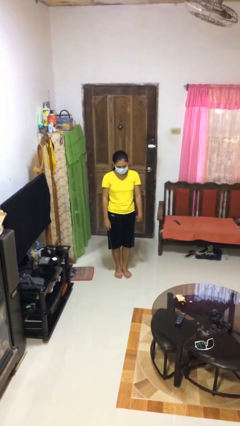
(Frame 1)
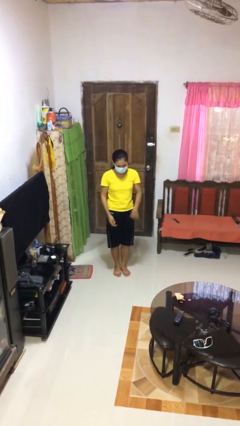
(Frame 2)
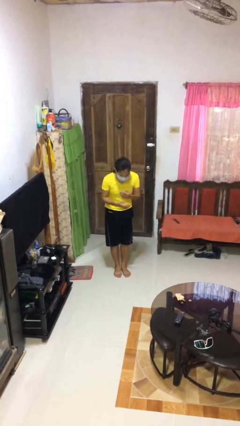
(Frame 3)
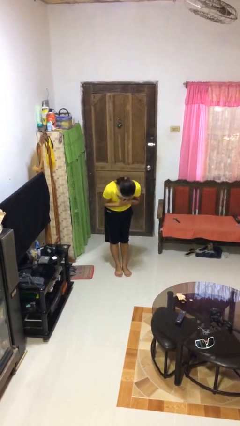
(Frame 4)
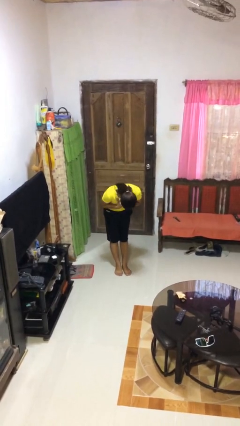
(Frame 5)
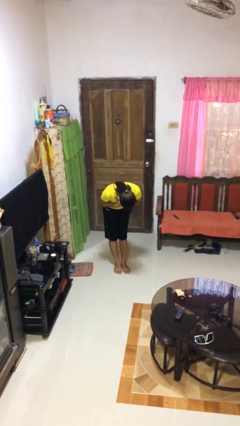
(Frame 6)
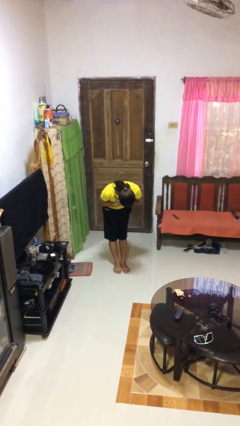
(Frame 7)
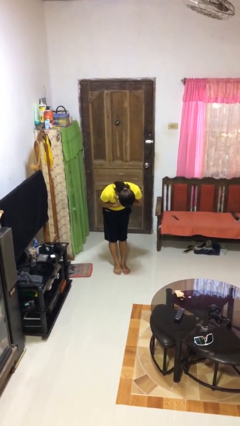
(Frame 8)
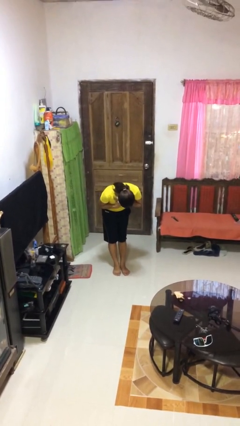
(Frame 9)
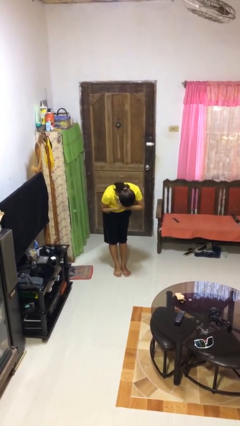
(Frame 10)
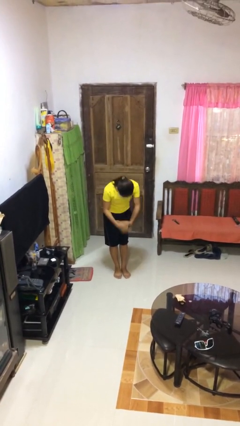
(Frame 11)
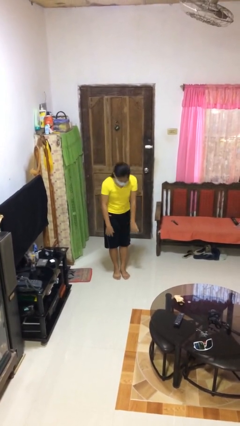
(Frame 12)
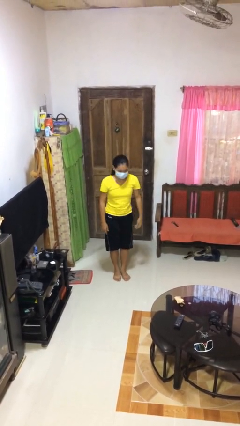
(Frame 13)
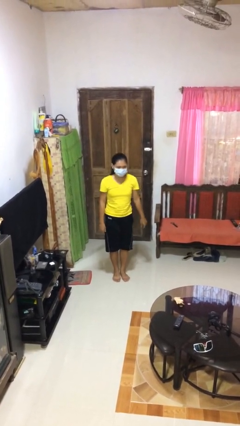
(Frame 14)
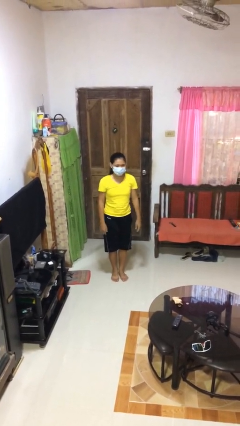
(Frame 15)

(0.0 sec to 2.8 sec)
person bows

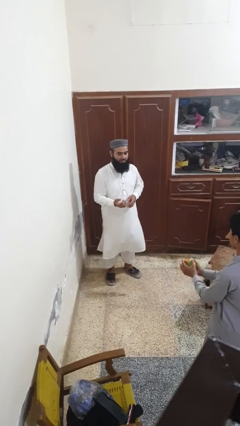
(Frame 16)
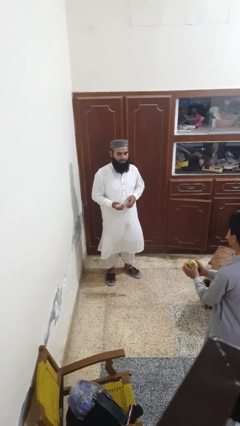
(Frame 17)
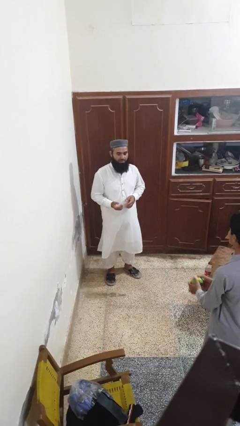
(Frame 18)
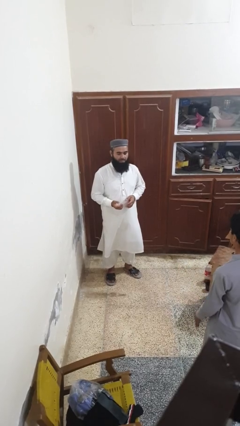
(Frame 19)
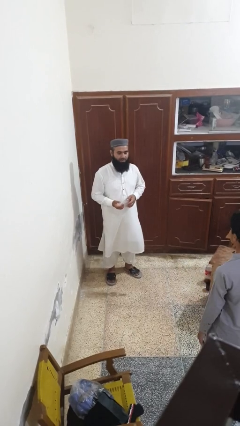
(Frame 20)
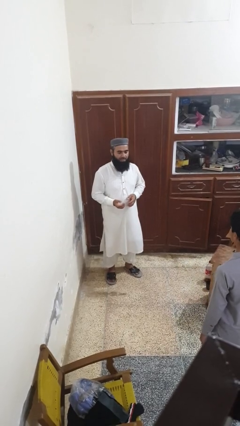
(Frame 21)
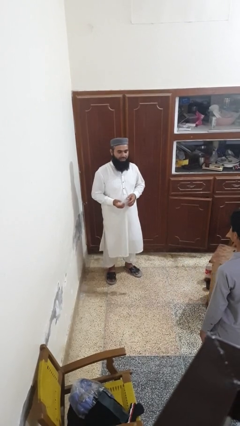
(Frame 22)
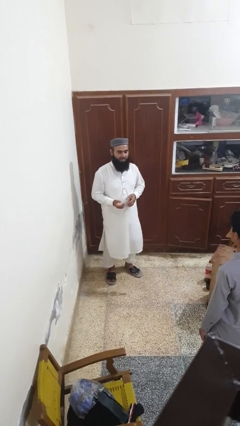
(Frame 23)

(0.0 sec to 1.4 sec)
person throws object to person

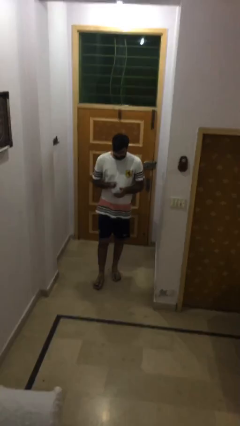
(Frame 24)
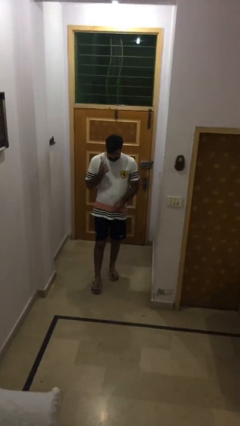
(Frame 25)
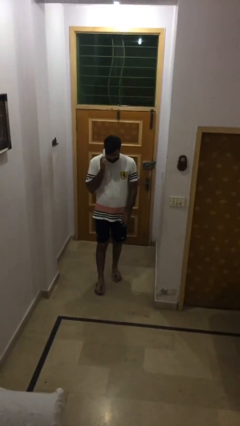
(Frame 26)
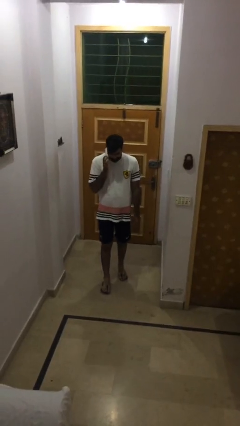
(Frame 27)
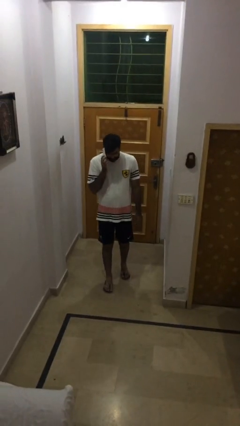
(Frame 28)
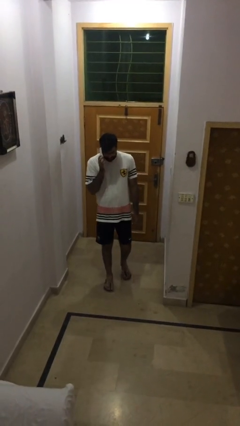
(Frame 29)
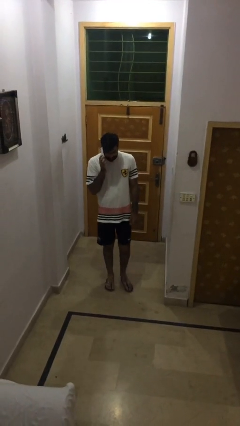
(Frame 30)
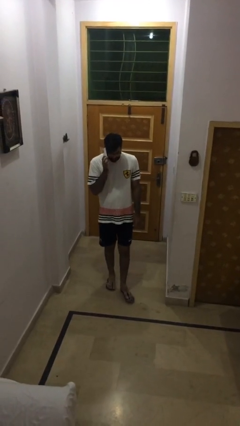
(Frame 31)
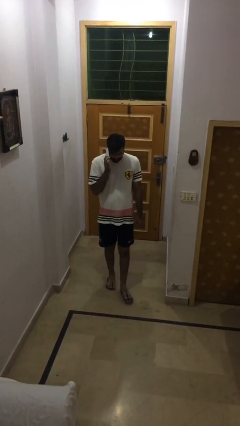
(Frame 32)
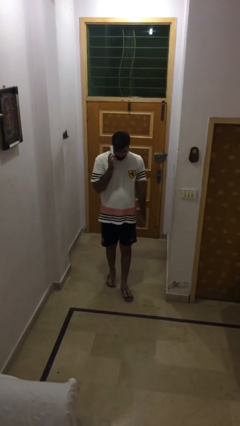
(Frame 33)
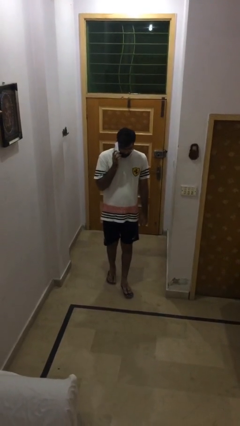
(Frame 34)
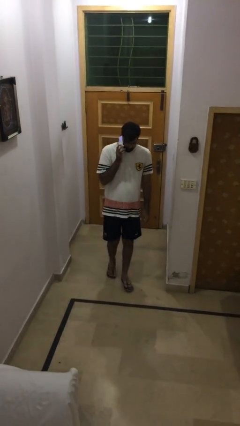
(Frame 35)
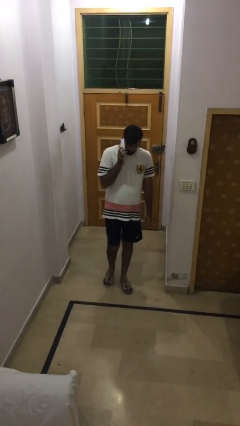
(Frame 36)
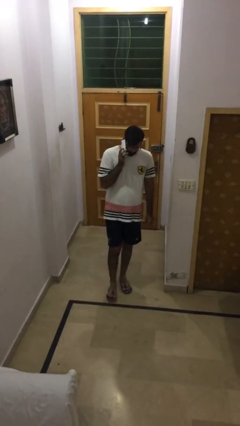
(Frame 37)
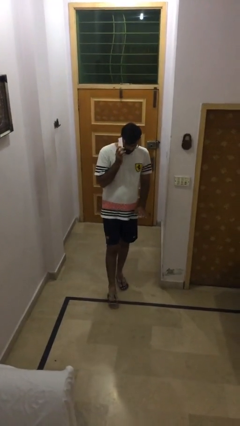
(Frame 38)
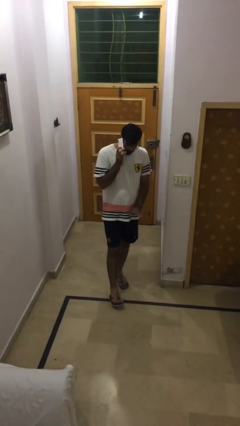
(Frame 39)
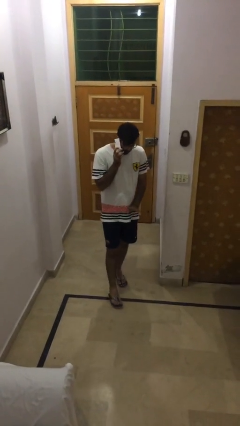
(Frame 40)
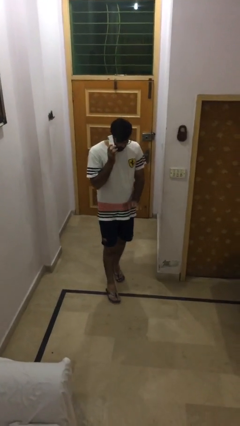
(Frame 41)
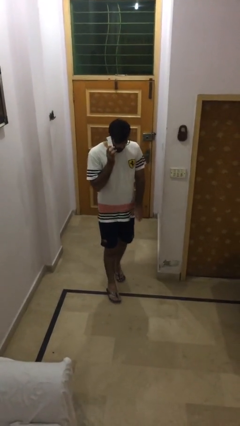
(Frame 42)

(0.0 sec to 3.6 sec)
person talks on phone

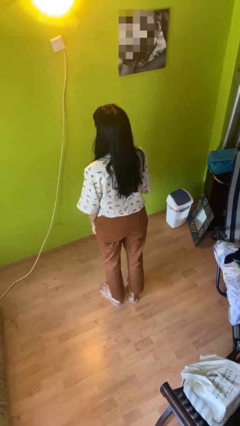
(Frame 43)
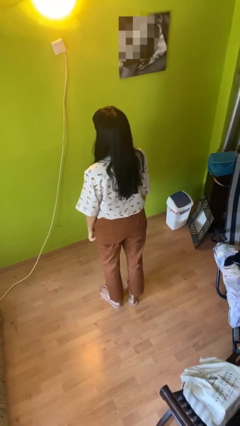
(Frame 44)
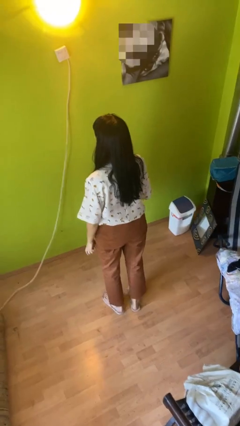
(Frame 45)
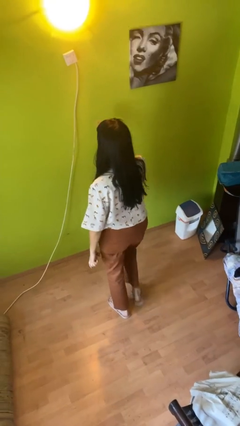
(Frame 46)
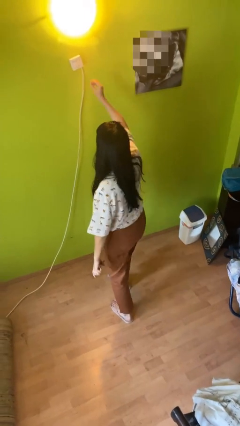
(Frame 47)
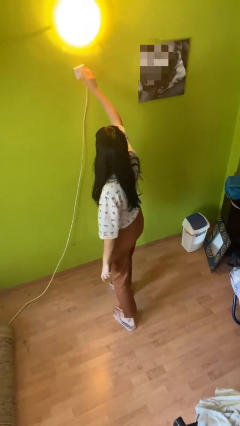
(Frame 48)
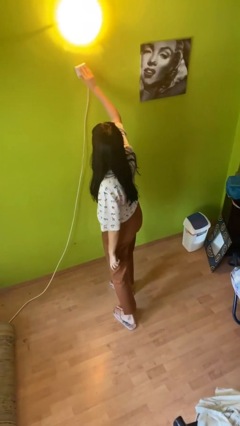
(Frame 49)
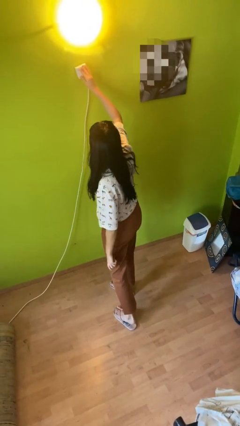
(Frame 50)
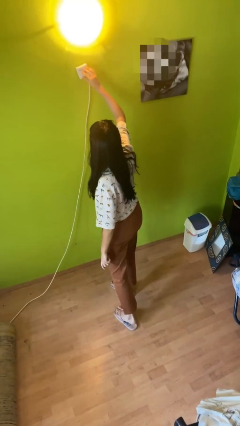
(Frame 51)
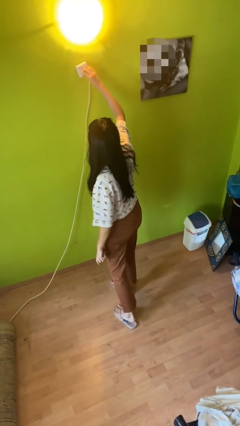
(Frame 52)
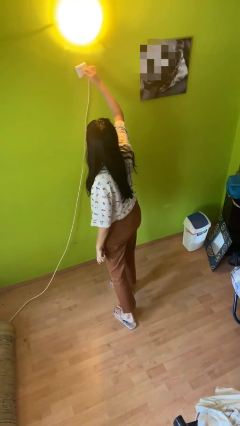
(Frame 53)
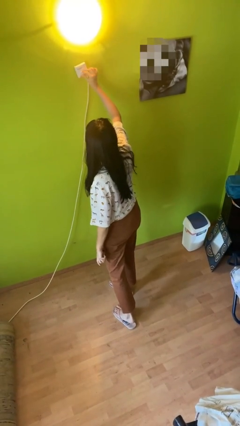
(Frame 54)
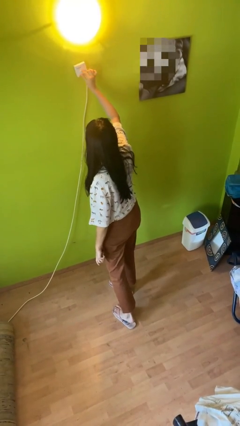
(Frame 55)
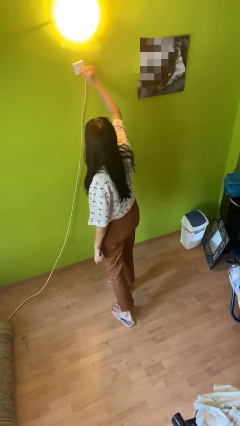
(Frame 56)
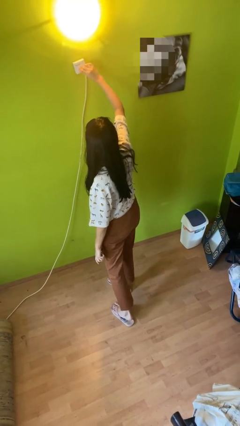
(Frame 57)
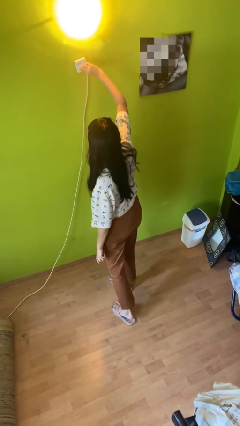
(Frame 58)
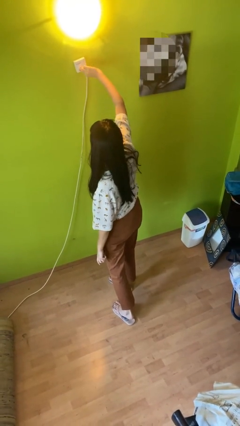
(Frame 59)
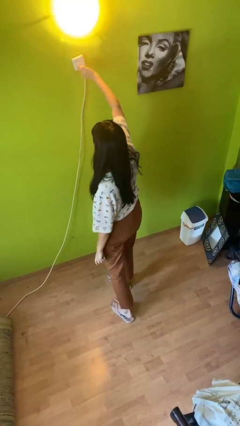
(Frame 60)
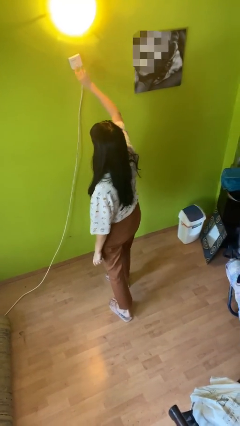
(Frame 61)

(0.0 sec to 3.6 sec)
person adjusts thermostat

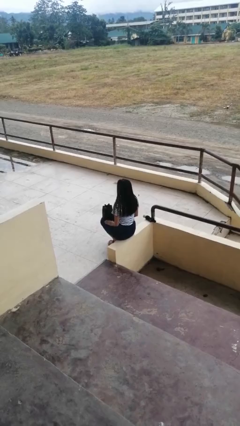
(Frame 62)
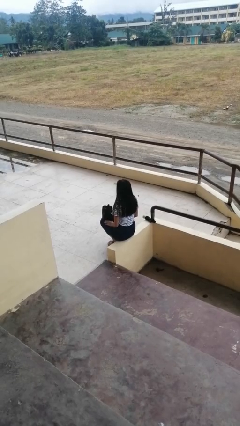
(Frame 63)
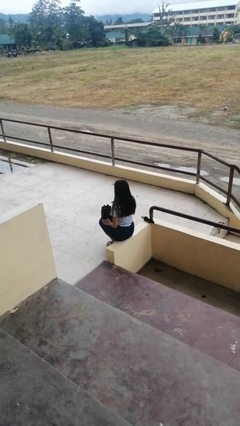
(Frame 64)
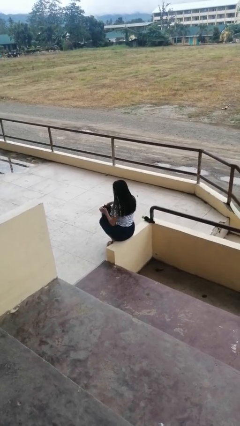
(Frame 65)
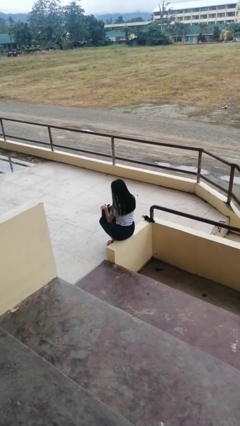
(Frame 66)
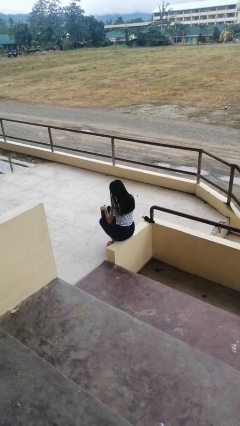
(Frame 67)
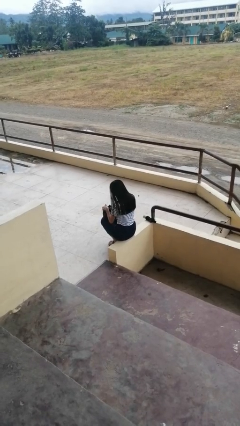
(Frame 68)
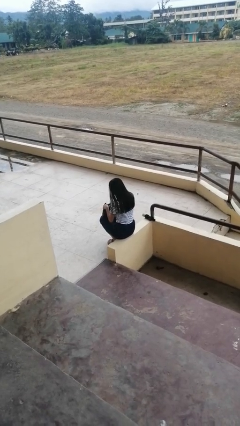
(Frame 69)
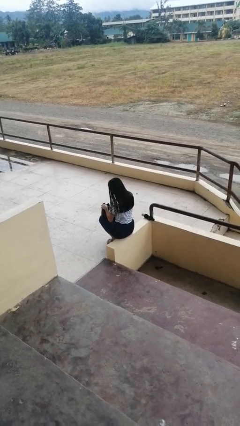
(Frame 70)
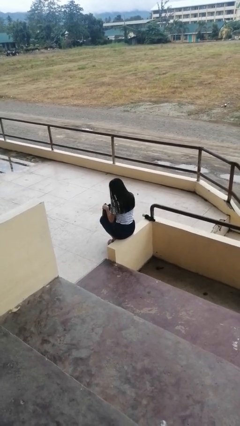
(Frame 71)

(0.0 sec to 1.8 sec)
person searches in bag

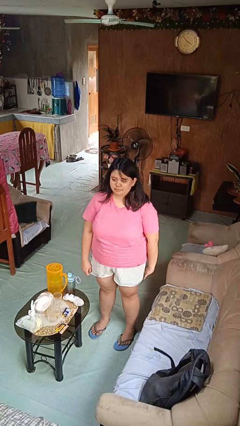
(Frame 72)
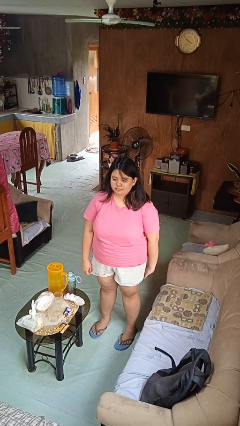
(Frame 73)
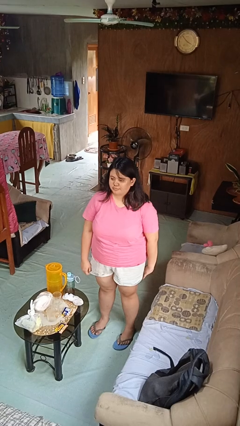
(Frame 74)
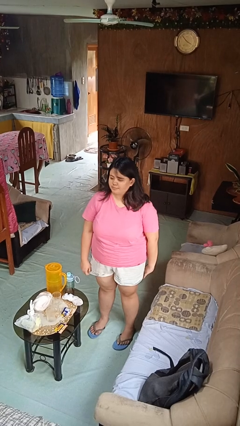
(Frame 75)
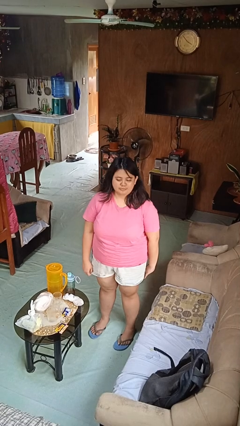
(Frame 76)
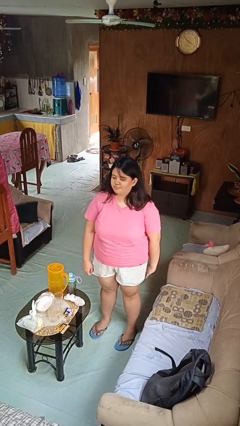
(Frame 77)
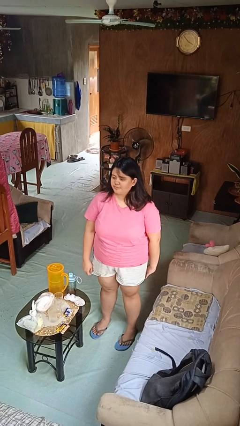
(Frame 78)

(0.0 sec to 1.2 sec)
person shakes head

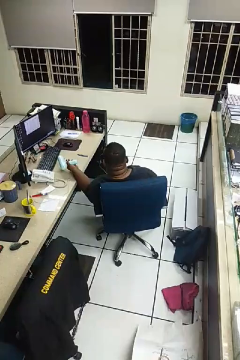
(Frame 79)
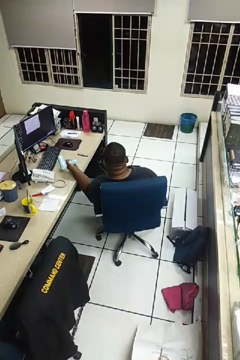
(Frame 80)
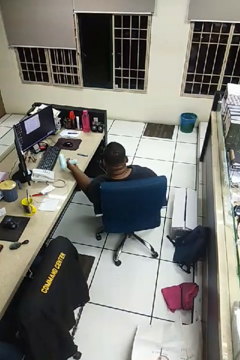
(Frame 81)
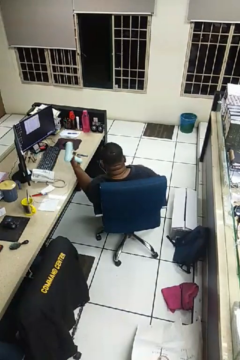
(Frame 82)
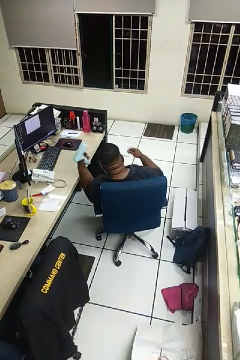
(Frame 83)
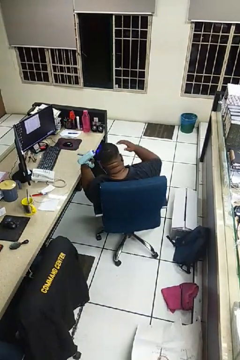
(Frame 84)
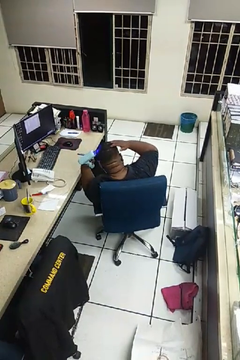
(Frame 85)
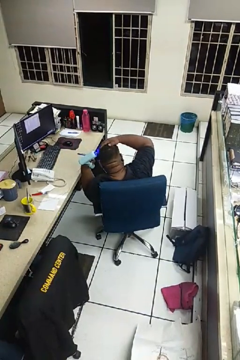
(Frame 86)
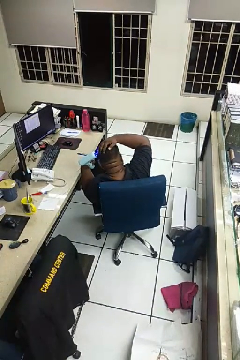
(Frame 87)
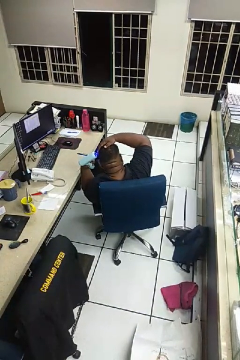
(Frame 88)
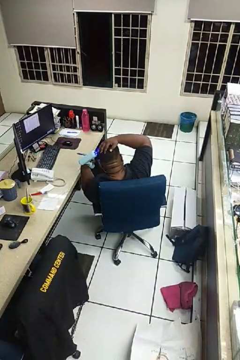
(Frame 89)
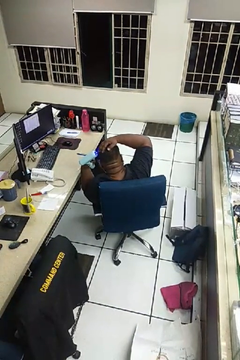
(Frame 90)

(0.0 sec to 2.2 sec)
person dries hair with hairdryer

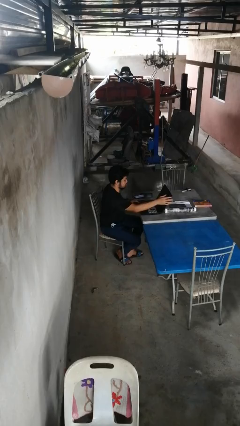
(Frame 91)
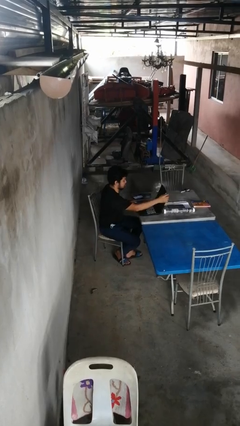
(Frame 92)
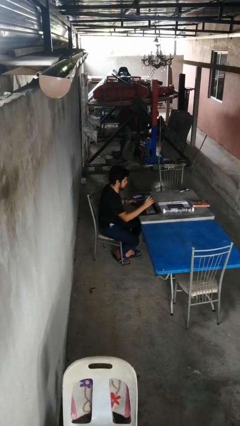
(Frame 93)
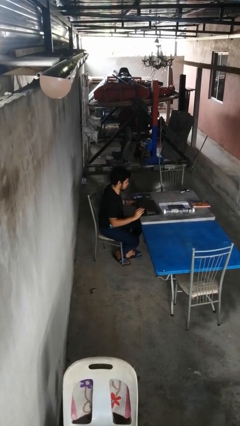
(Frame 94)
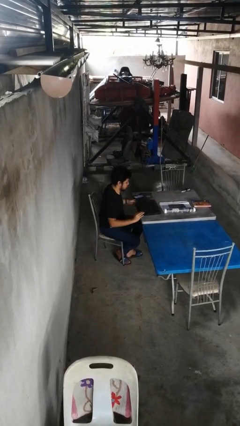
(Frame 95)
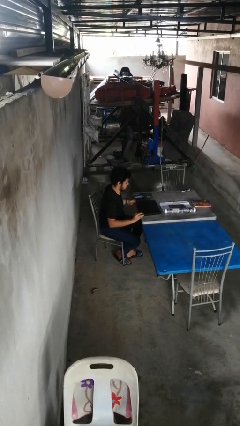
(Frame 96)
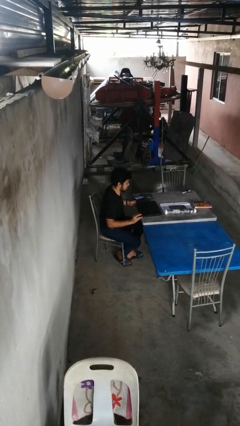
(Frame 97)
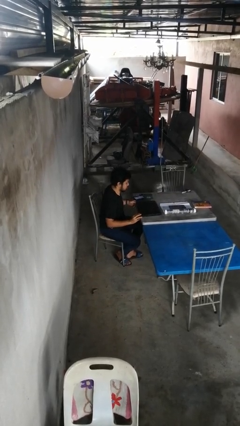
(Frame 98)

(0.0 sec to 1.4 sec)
person closes laptop
